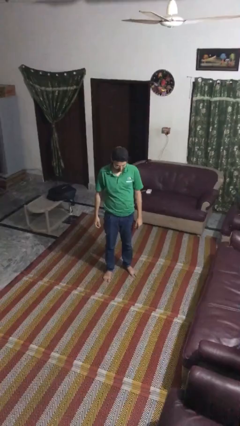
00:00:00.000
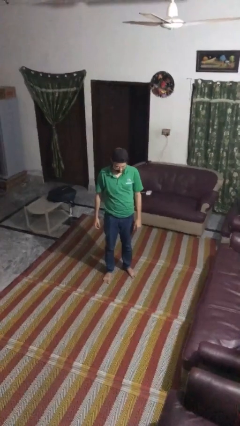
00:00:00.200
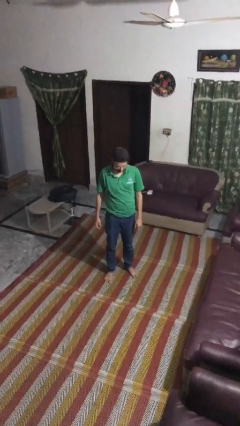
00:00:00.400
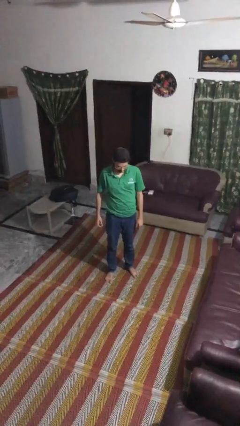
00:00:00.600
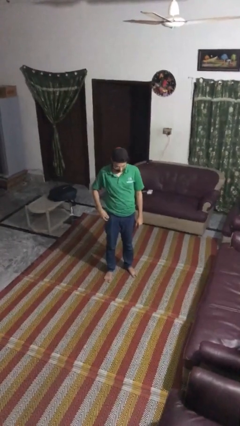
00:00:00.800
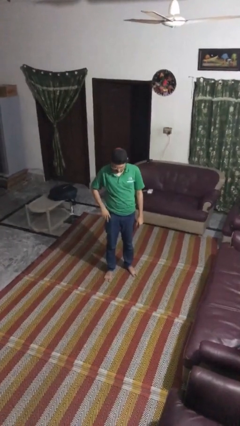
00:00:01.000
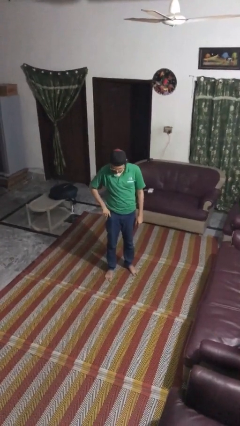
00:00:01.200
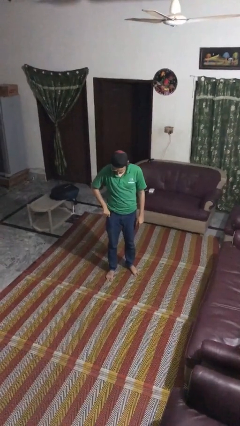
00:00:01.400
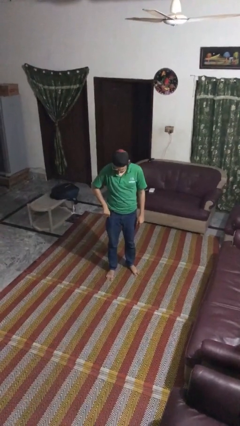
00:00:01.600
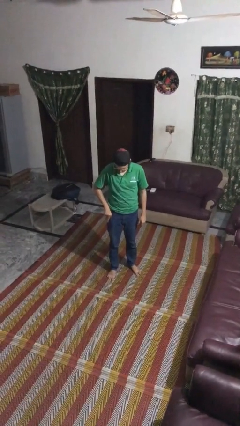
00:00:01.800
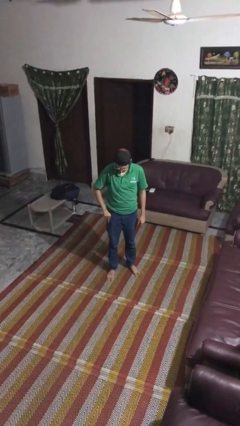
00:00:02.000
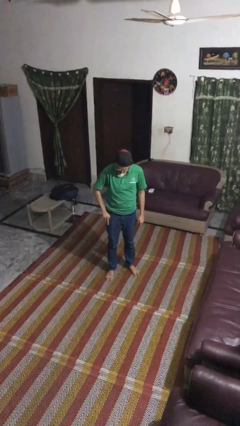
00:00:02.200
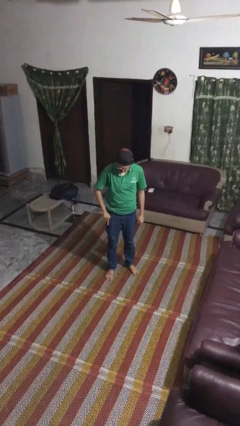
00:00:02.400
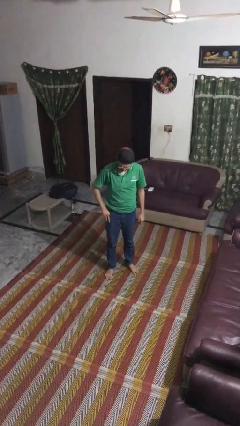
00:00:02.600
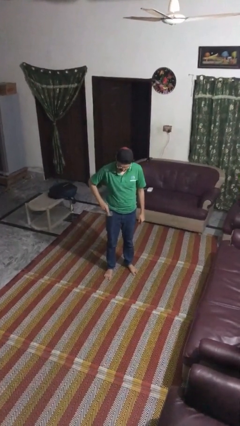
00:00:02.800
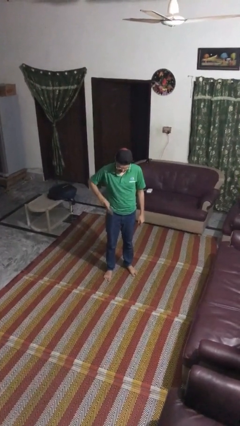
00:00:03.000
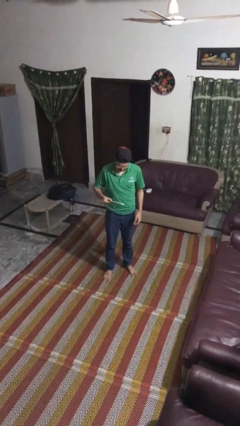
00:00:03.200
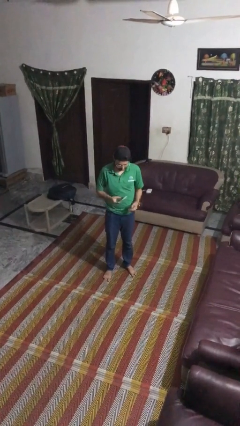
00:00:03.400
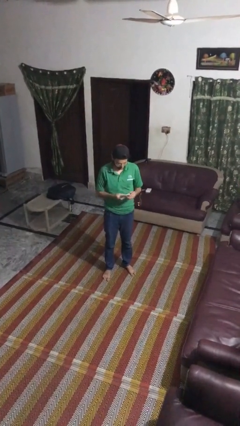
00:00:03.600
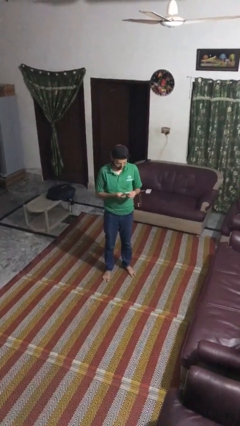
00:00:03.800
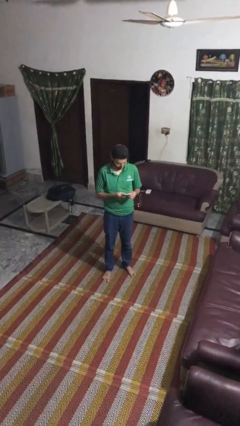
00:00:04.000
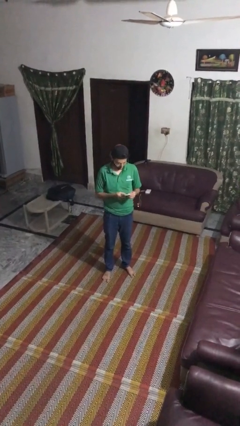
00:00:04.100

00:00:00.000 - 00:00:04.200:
person takes phone from pocket

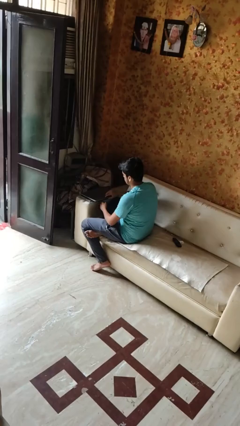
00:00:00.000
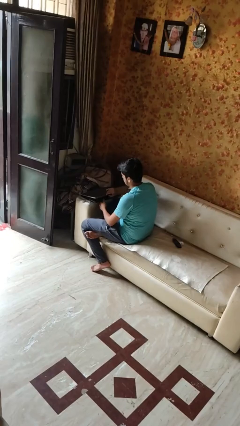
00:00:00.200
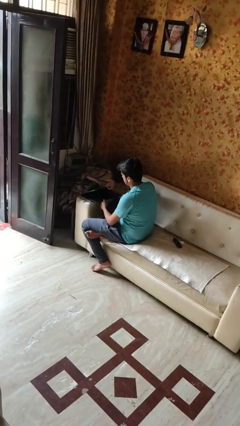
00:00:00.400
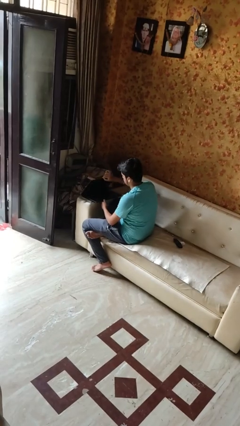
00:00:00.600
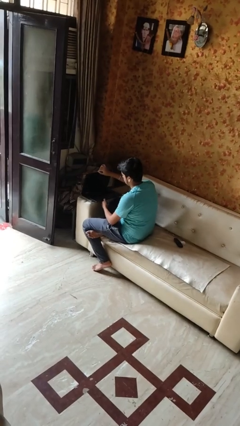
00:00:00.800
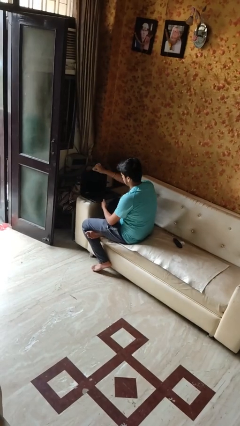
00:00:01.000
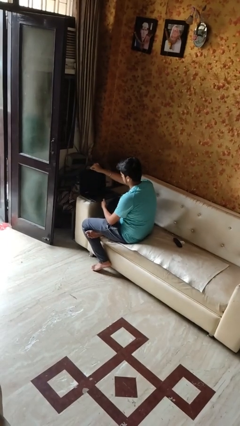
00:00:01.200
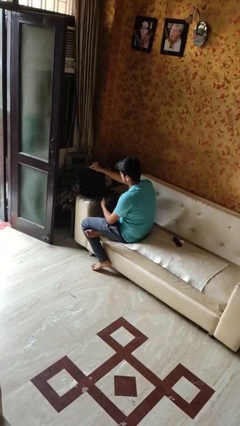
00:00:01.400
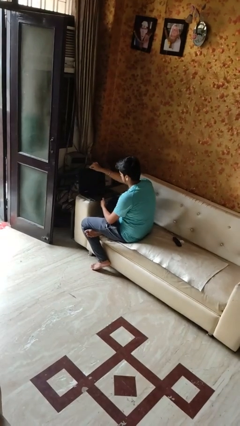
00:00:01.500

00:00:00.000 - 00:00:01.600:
person opens laptop

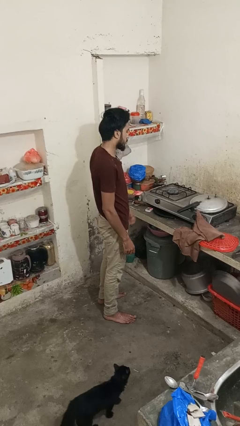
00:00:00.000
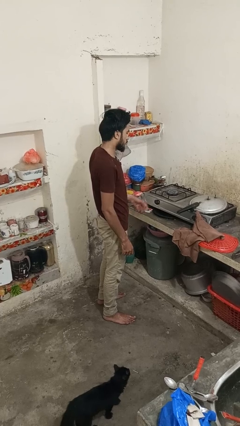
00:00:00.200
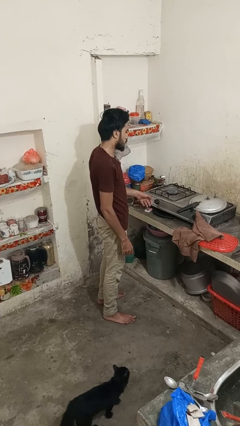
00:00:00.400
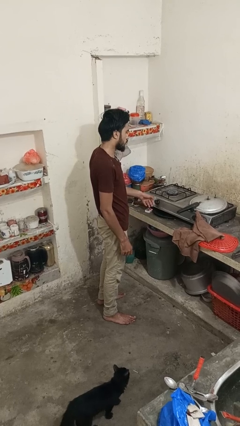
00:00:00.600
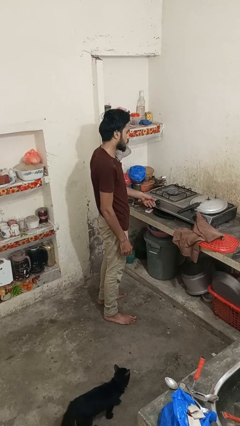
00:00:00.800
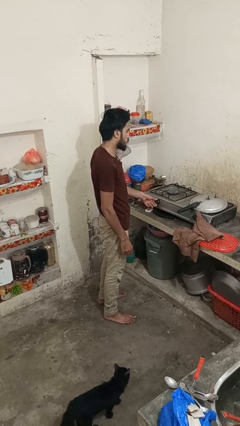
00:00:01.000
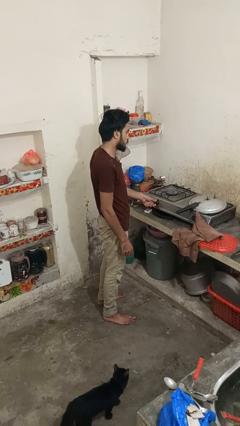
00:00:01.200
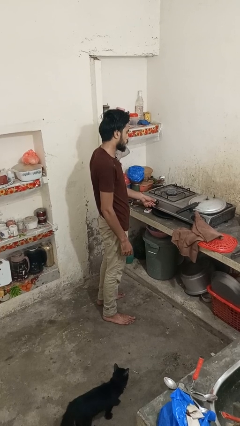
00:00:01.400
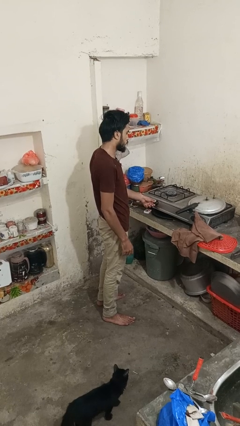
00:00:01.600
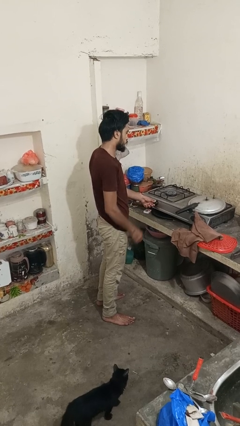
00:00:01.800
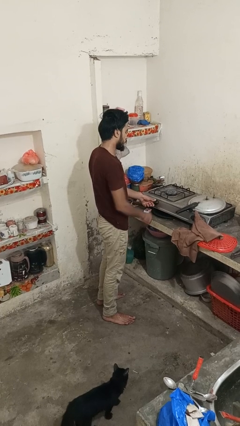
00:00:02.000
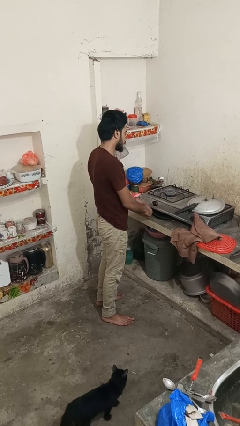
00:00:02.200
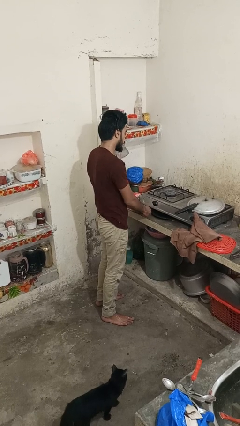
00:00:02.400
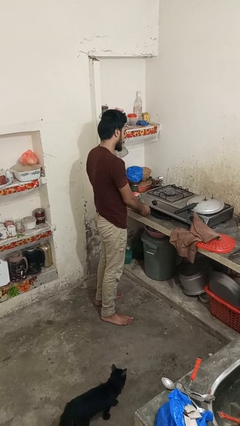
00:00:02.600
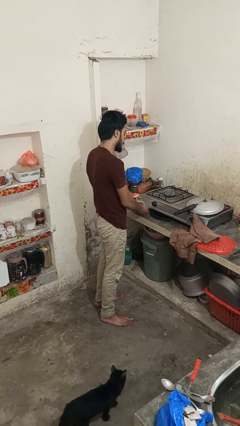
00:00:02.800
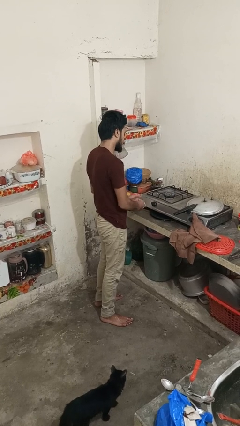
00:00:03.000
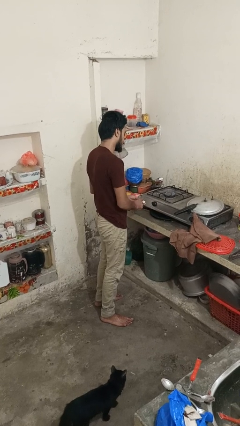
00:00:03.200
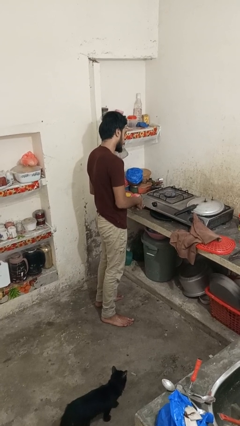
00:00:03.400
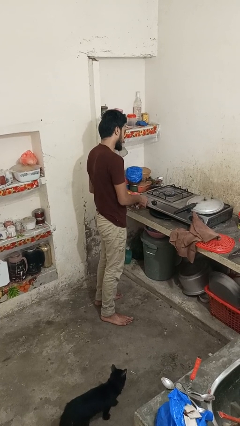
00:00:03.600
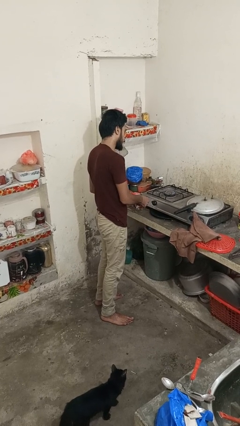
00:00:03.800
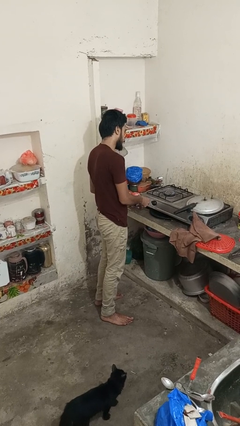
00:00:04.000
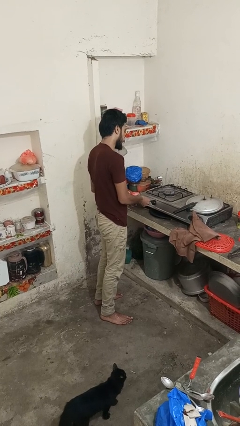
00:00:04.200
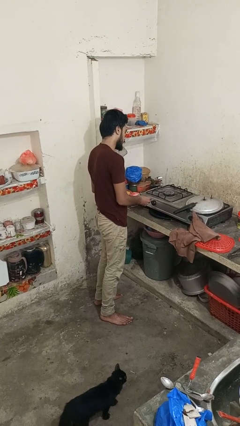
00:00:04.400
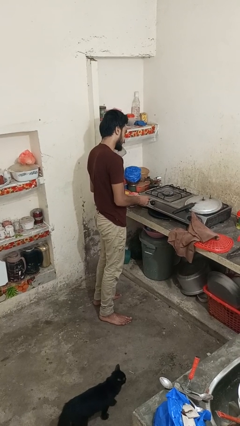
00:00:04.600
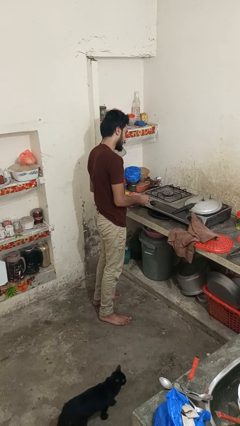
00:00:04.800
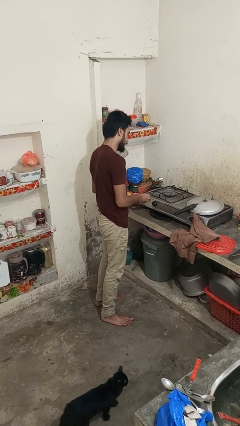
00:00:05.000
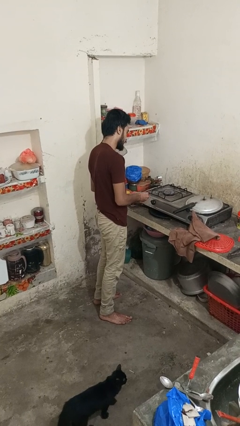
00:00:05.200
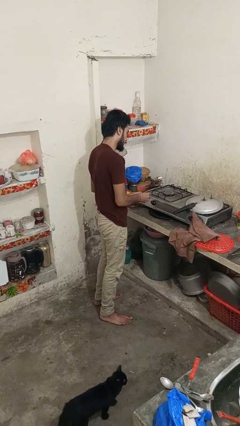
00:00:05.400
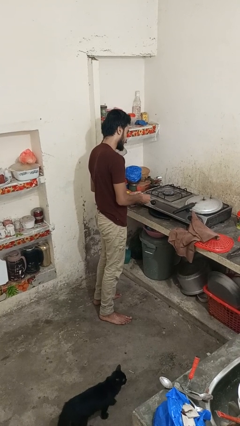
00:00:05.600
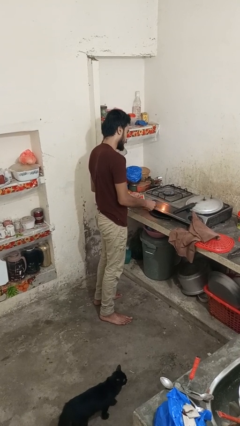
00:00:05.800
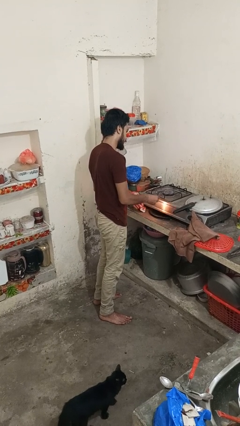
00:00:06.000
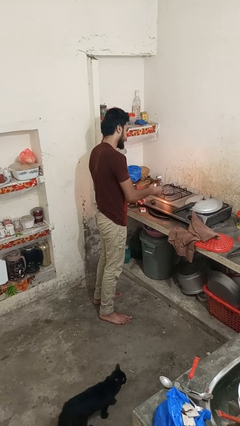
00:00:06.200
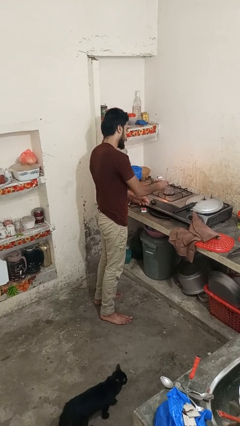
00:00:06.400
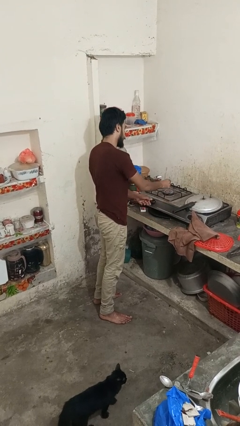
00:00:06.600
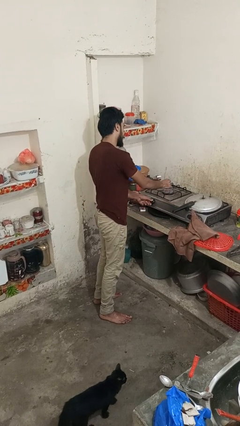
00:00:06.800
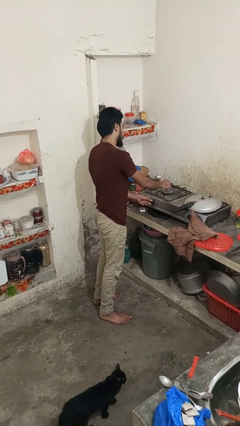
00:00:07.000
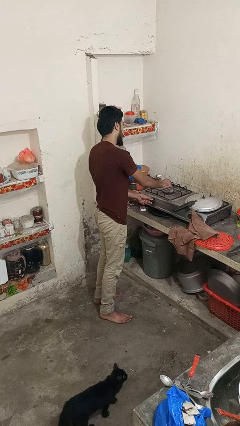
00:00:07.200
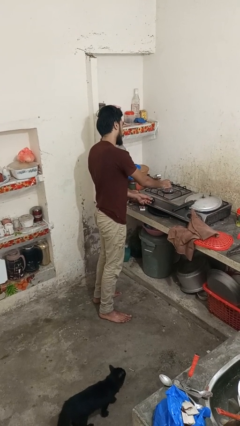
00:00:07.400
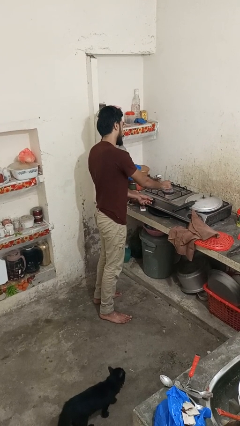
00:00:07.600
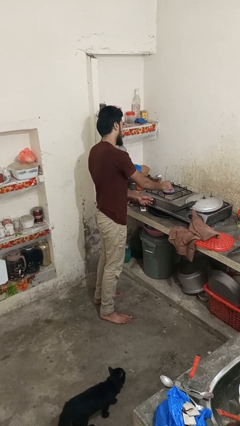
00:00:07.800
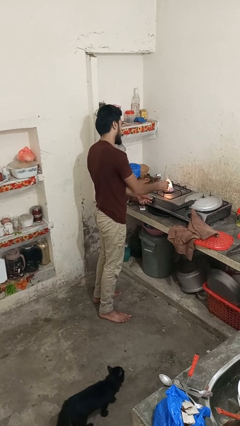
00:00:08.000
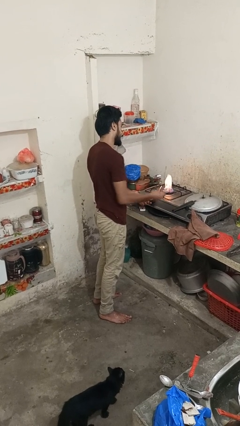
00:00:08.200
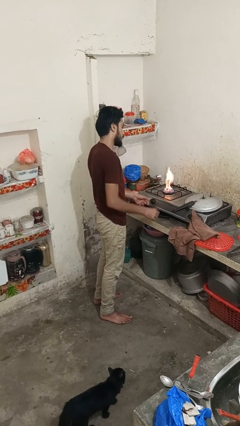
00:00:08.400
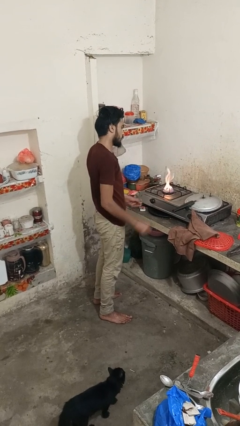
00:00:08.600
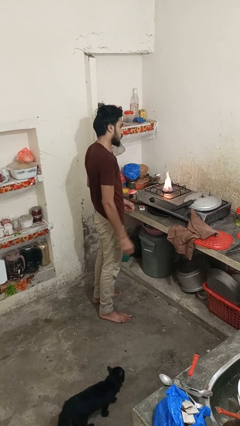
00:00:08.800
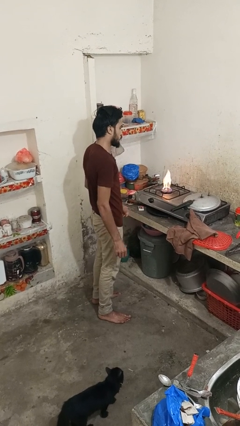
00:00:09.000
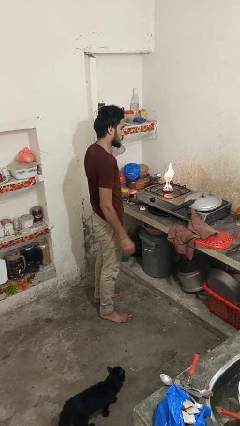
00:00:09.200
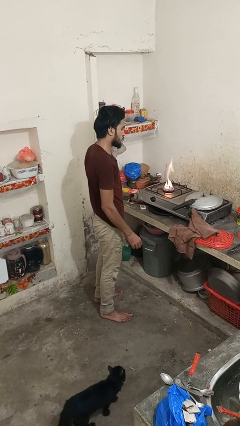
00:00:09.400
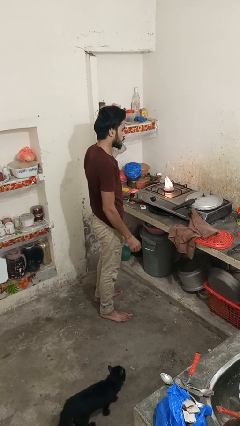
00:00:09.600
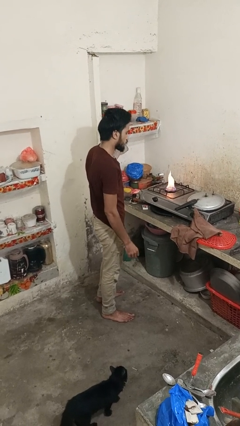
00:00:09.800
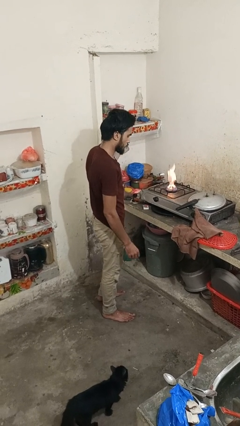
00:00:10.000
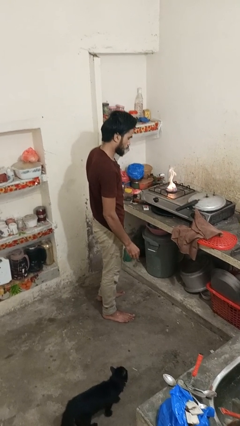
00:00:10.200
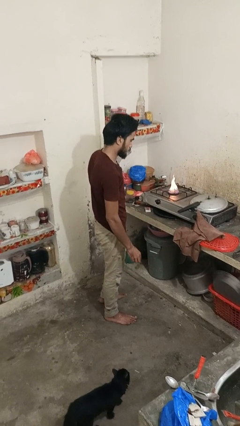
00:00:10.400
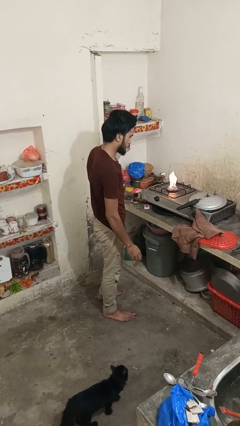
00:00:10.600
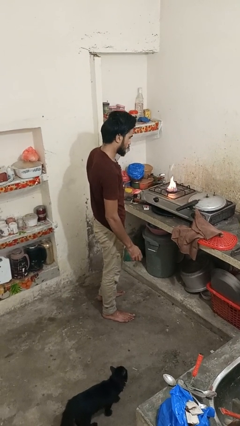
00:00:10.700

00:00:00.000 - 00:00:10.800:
person turns on stovetop

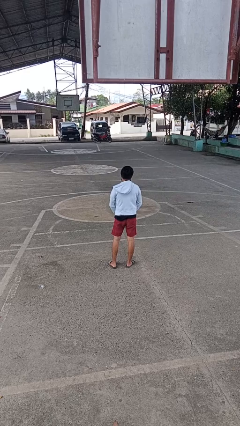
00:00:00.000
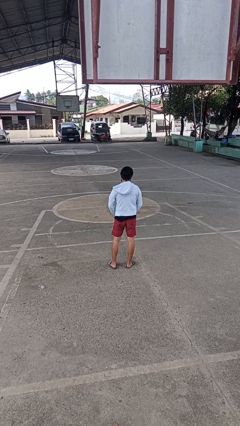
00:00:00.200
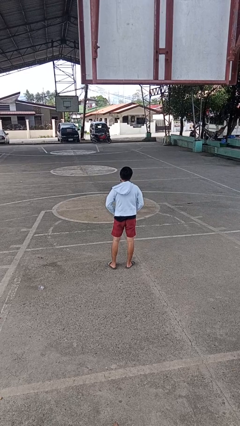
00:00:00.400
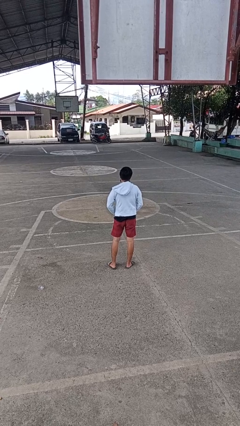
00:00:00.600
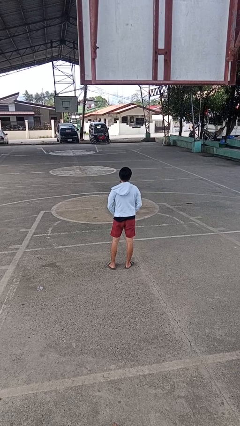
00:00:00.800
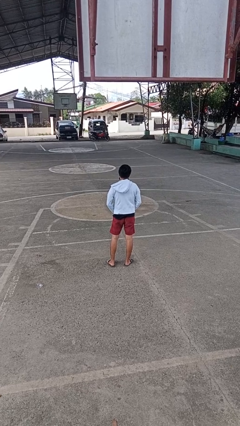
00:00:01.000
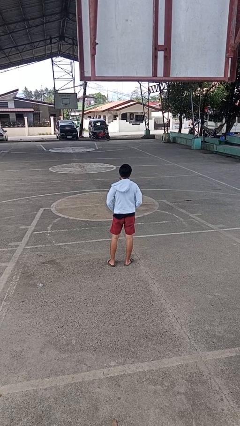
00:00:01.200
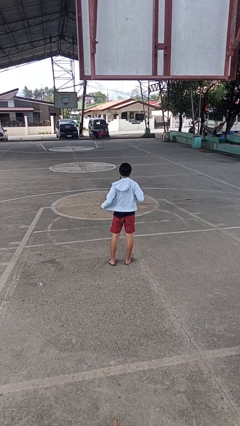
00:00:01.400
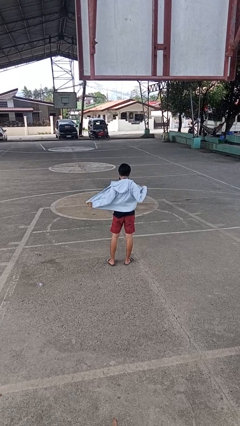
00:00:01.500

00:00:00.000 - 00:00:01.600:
person unzips jacket
